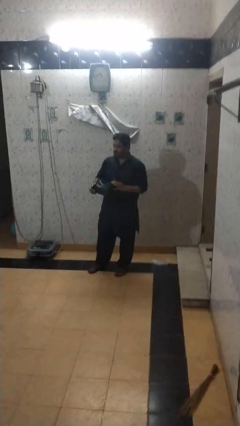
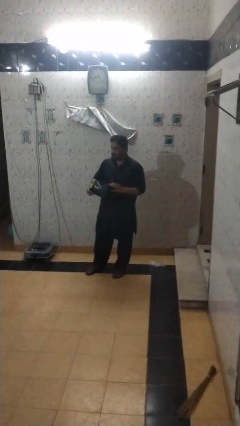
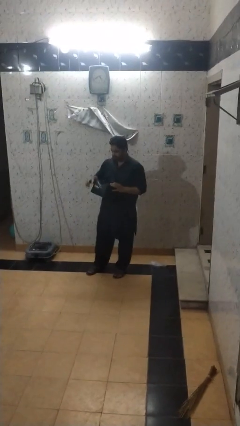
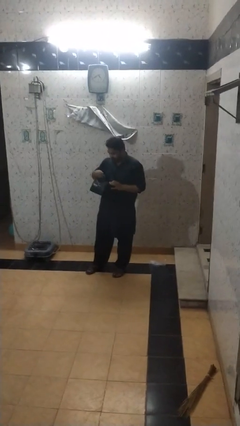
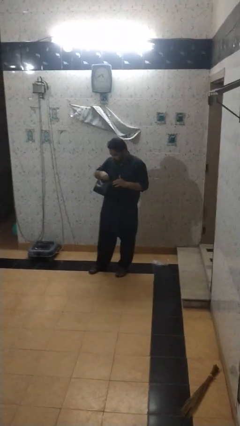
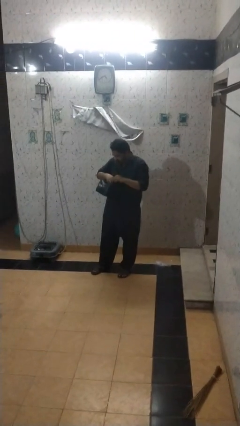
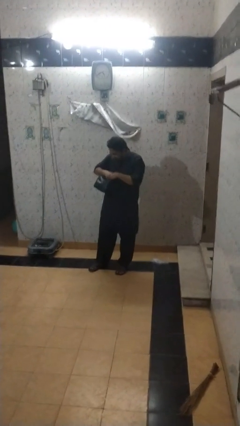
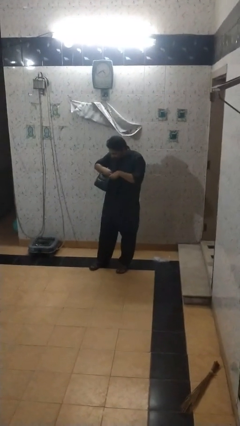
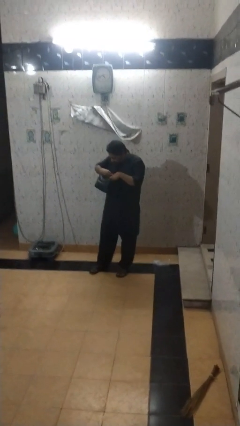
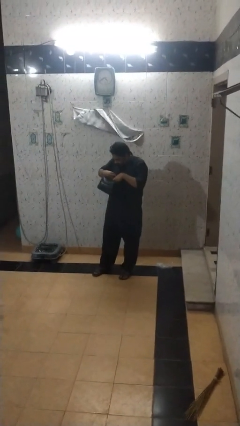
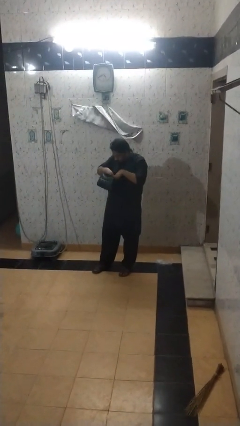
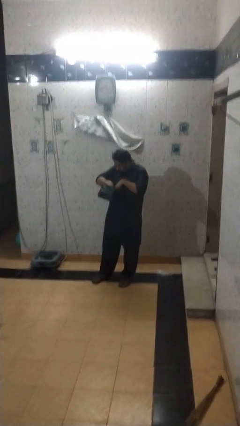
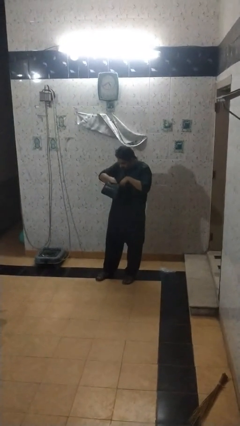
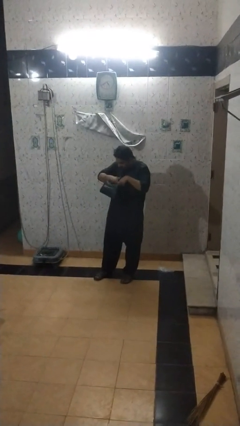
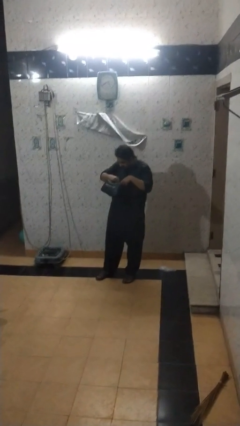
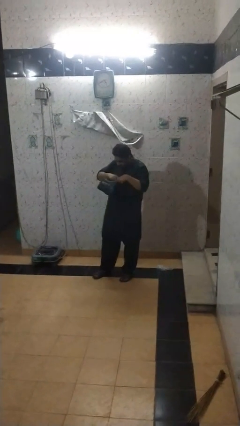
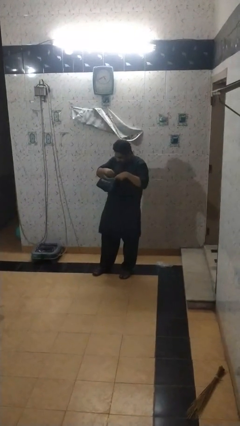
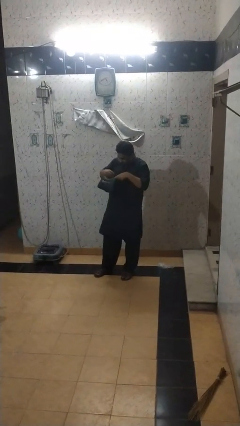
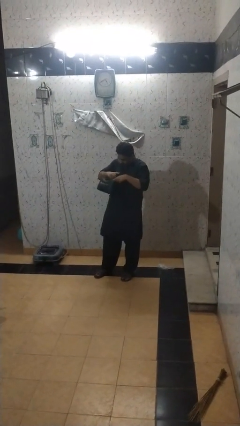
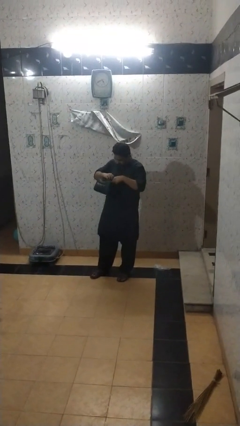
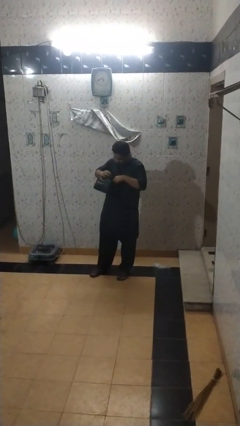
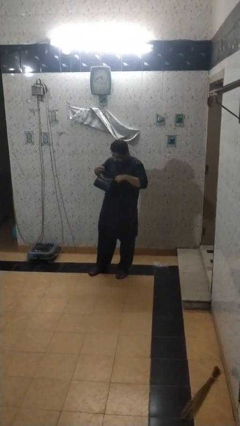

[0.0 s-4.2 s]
person searches in backpack

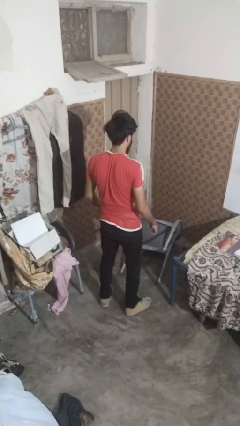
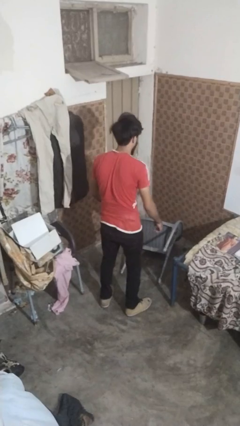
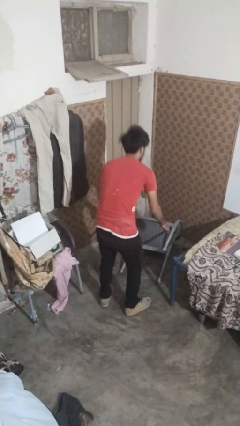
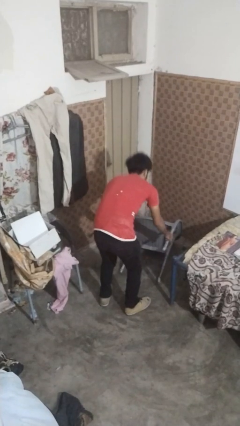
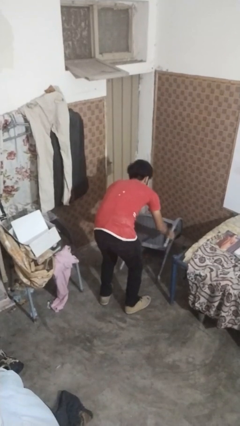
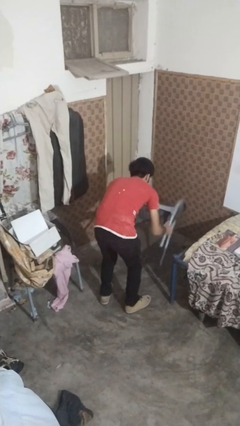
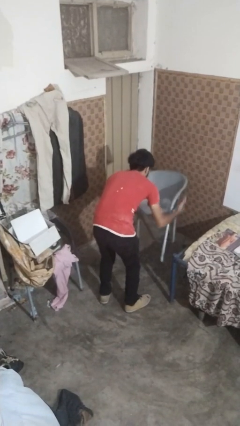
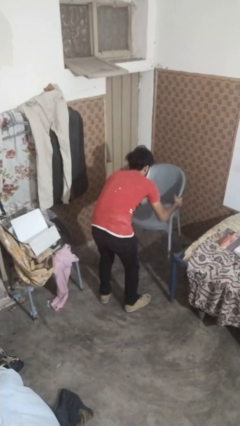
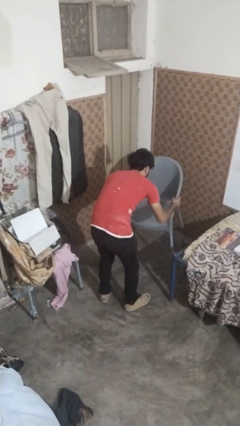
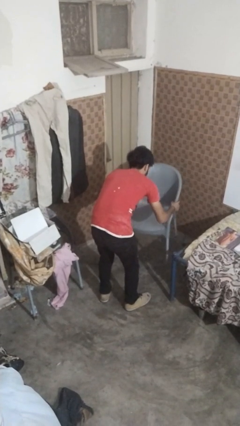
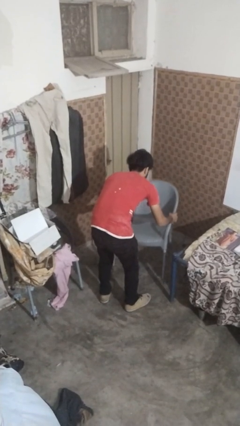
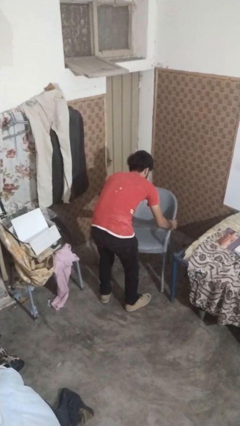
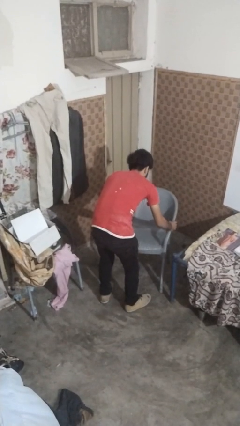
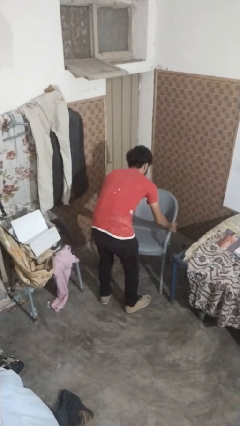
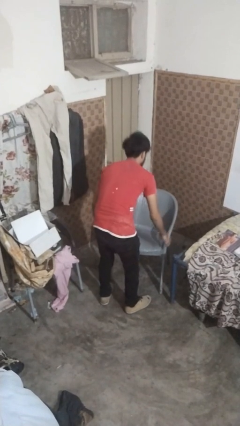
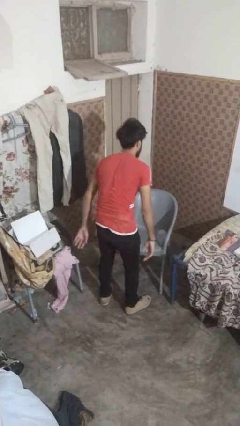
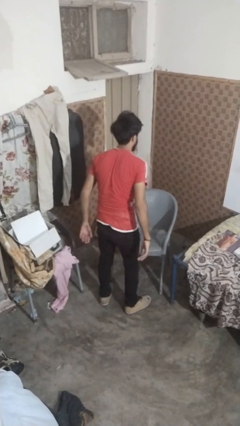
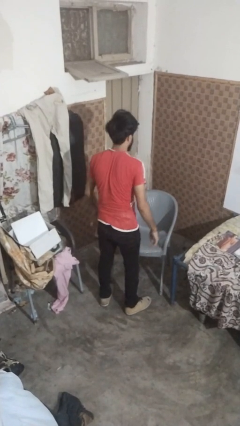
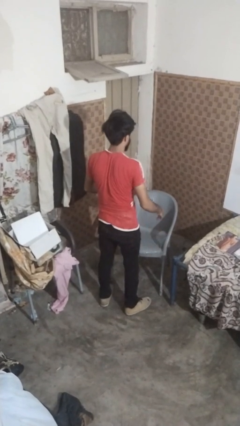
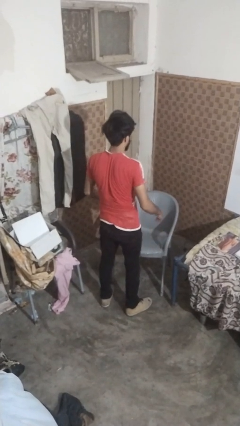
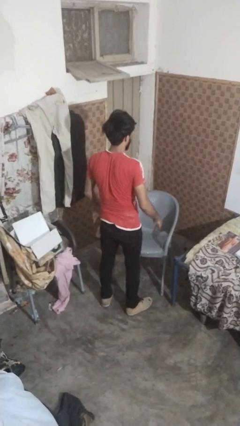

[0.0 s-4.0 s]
person sets upright furniture

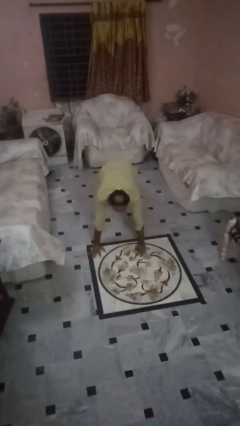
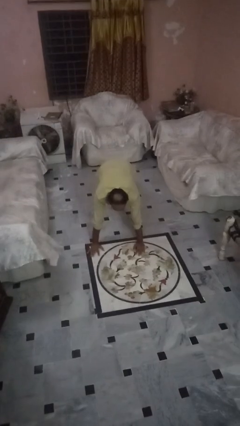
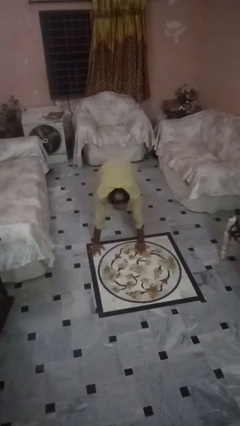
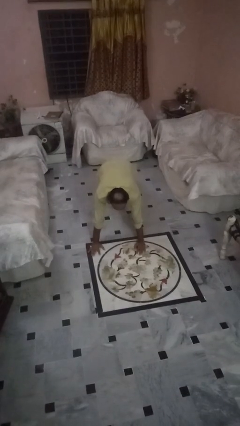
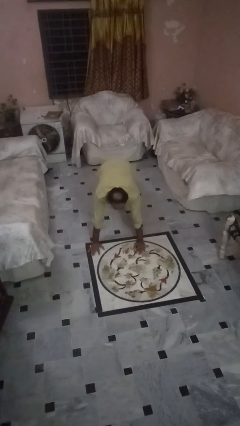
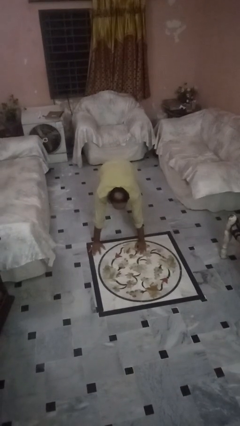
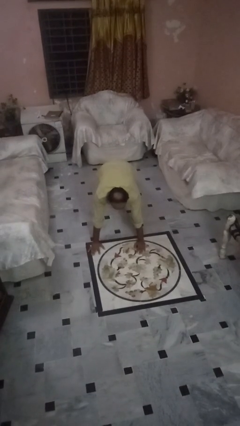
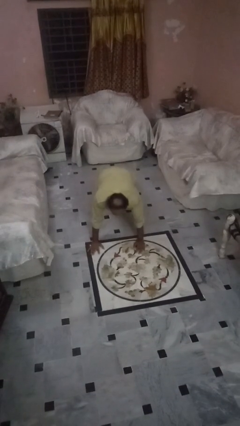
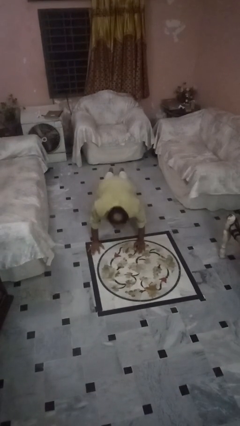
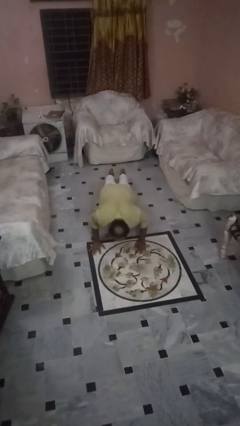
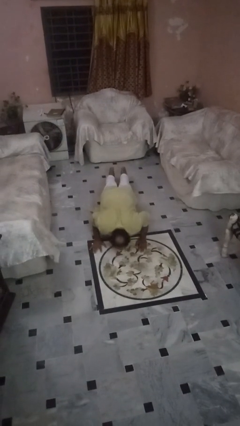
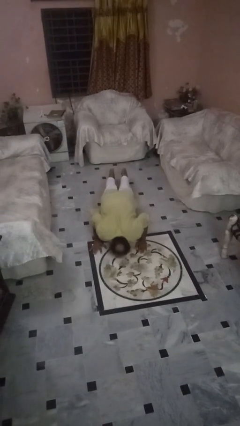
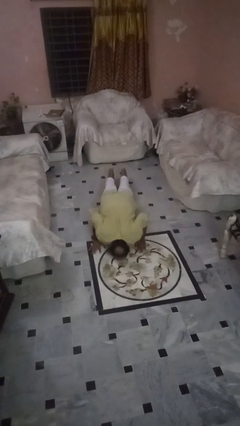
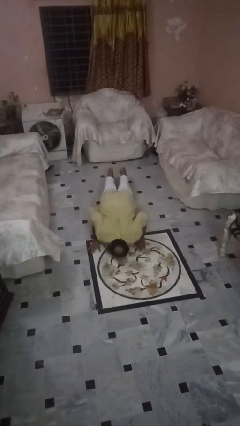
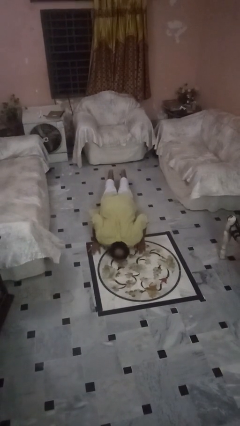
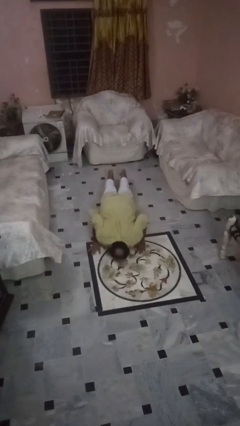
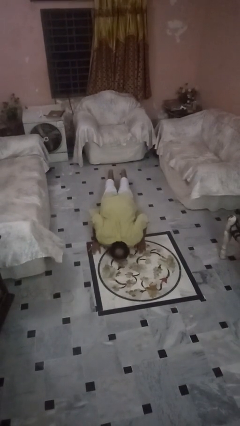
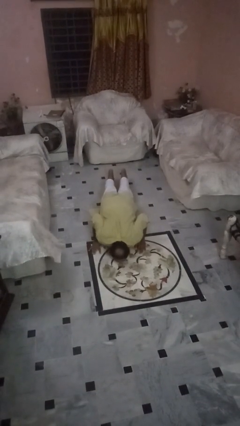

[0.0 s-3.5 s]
person exercises with pushup

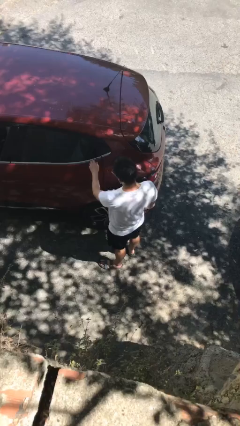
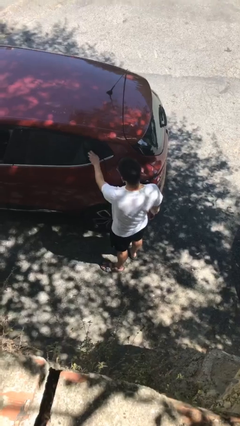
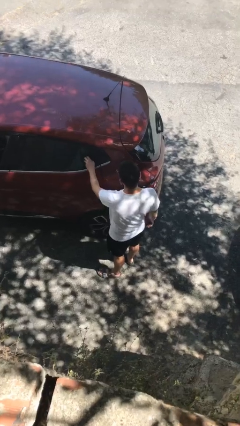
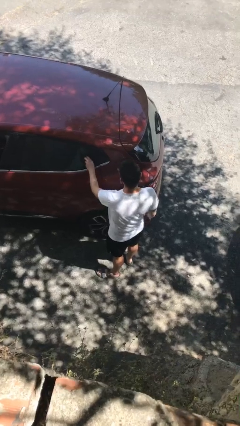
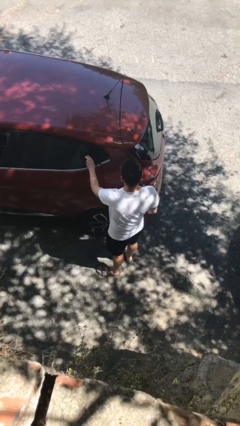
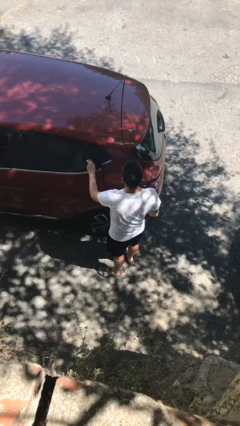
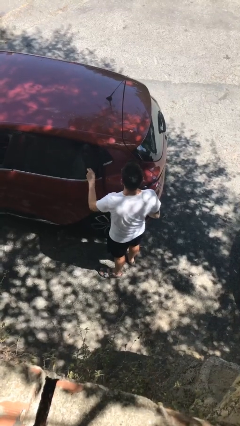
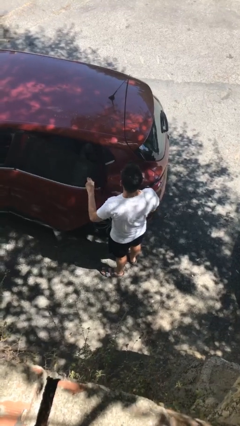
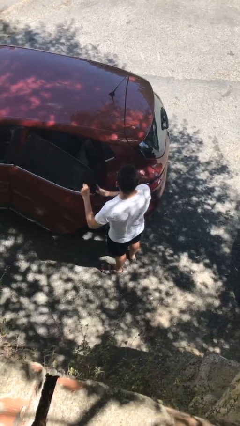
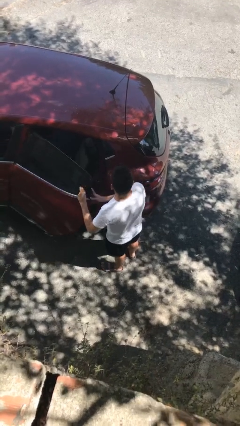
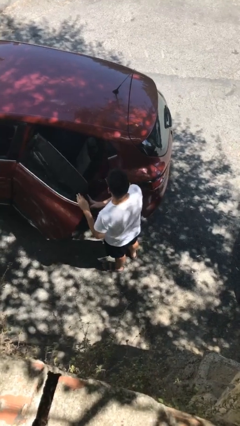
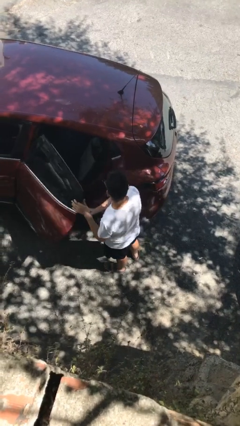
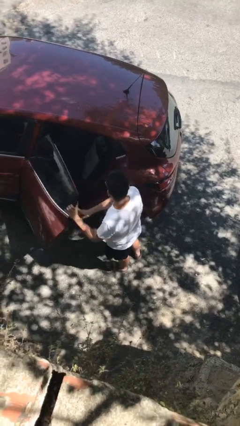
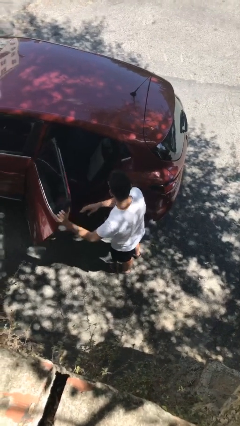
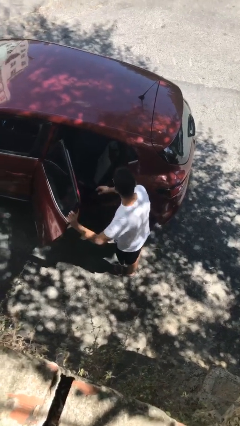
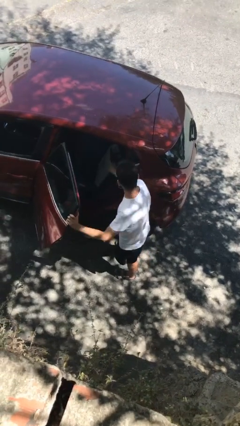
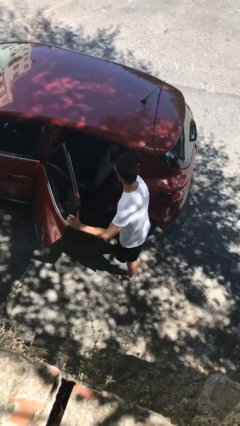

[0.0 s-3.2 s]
person opens car door

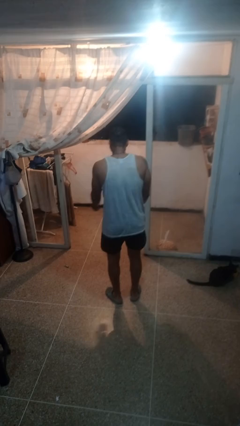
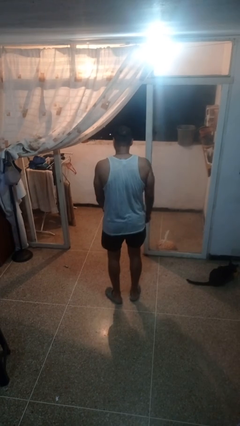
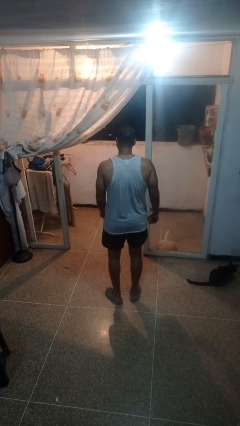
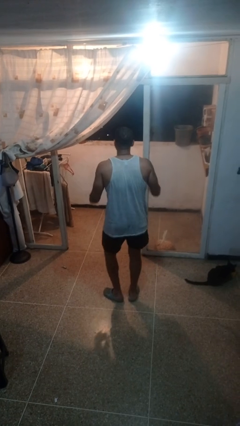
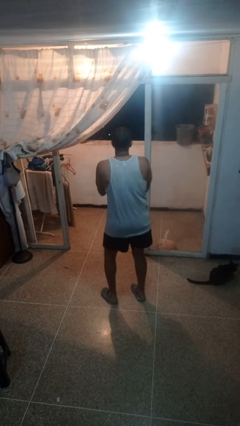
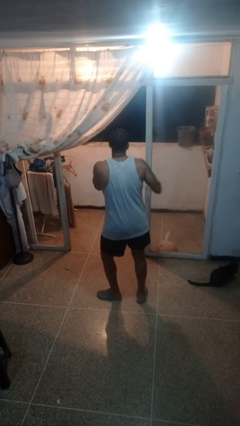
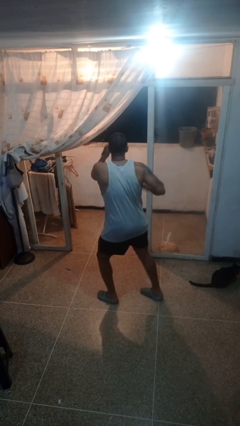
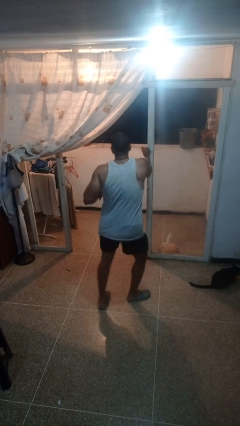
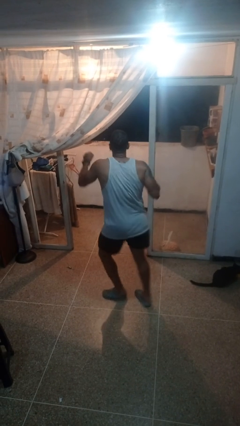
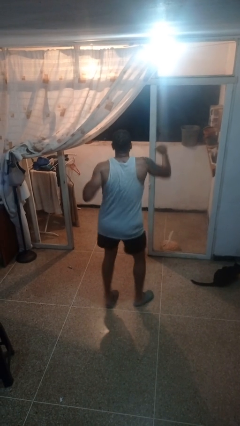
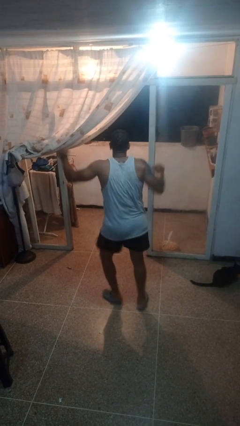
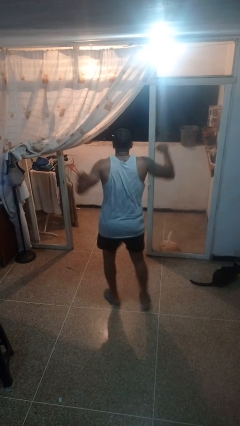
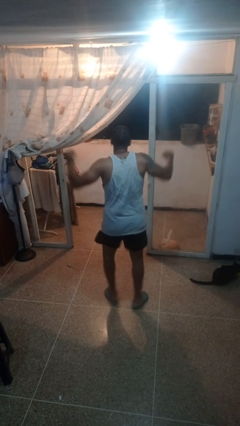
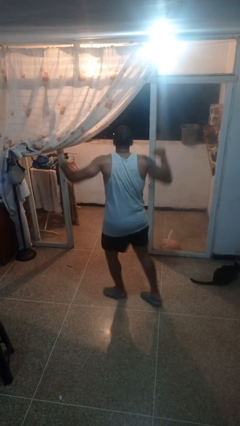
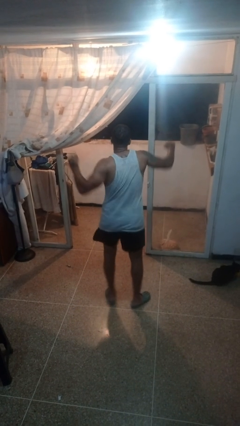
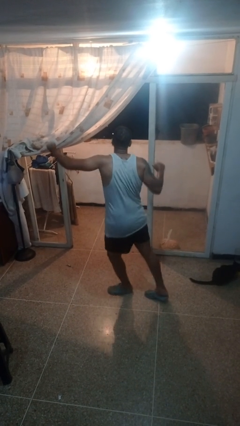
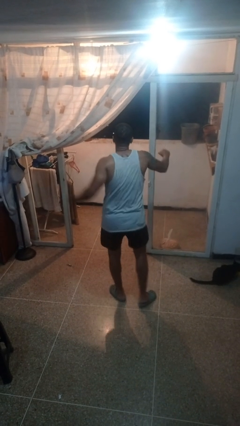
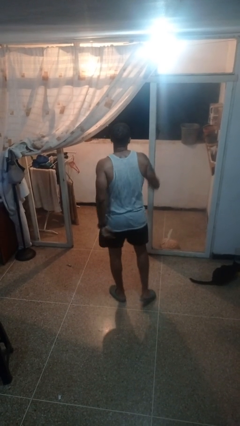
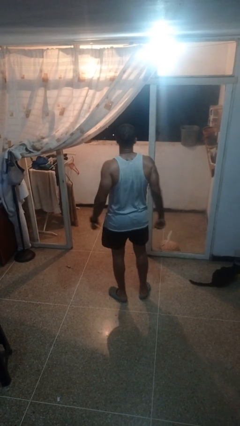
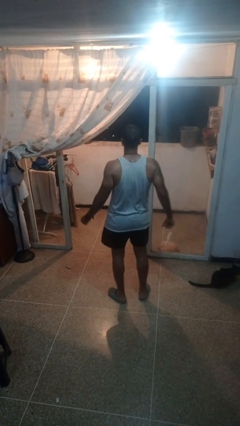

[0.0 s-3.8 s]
person dances in place
